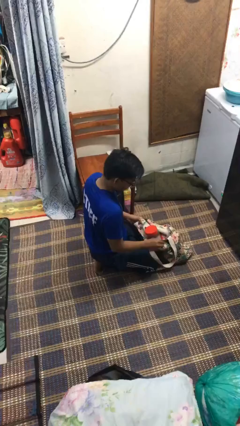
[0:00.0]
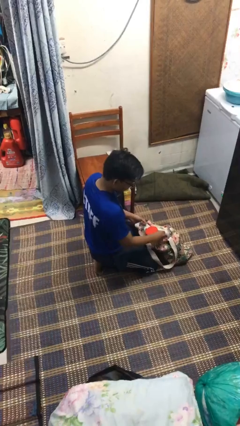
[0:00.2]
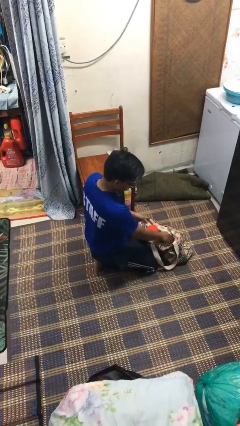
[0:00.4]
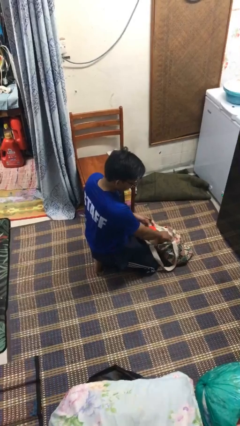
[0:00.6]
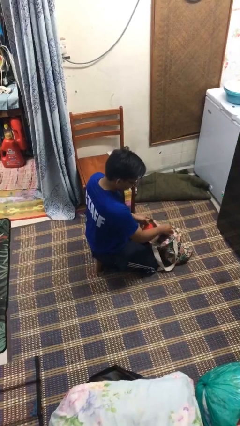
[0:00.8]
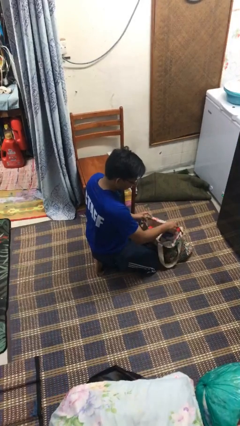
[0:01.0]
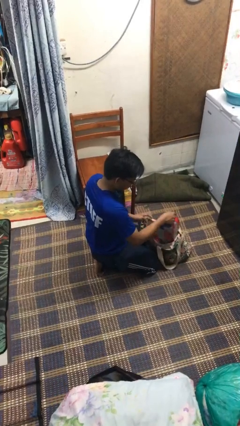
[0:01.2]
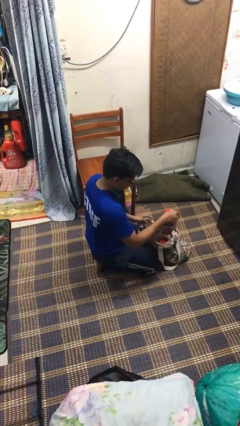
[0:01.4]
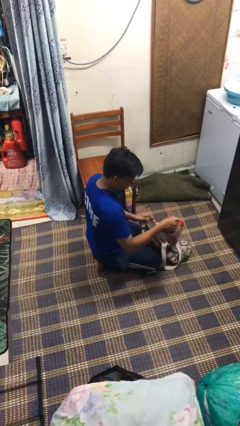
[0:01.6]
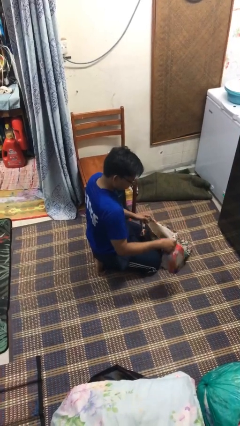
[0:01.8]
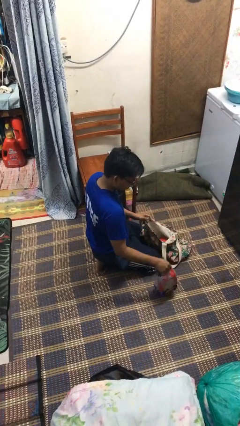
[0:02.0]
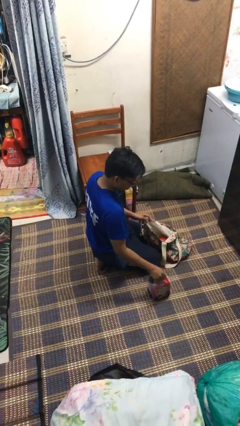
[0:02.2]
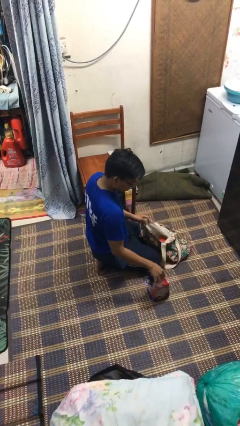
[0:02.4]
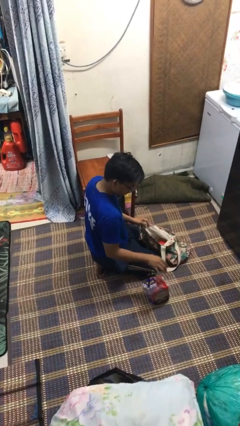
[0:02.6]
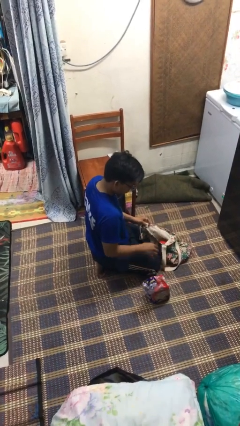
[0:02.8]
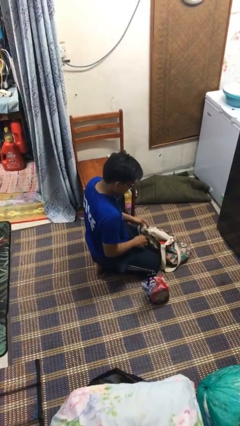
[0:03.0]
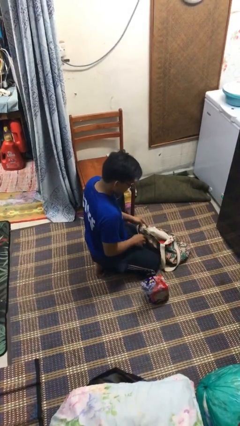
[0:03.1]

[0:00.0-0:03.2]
person takes object from bag

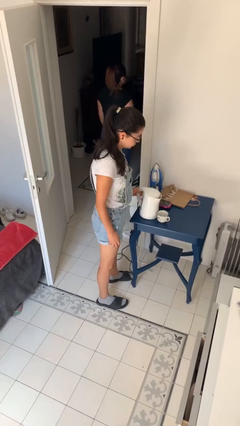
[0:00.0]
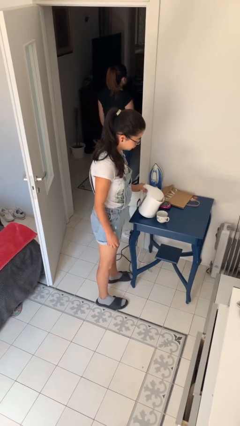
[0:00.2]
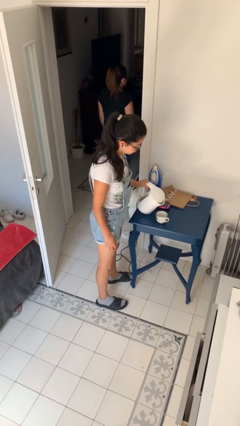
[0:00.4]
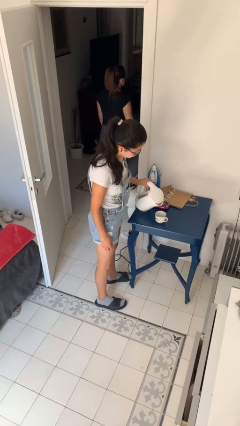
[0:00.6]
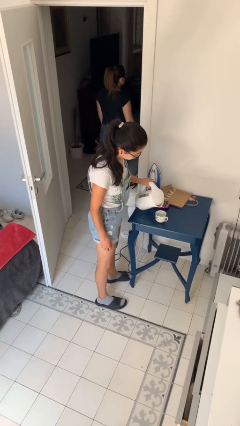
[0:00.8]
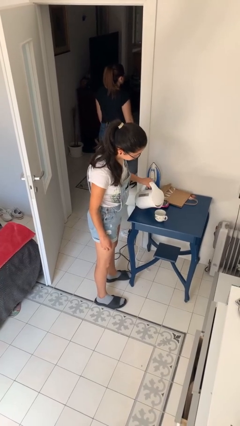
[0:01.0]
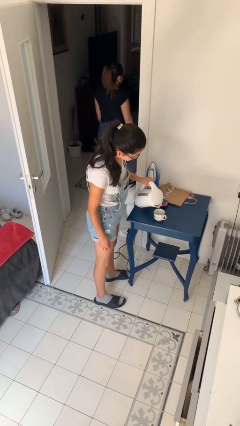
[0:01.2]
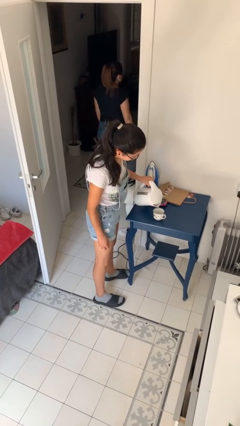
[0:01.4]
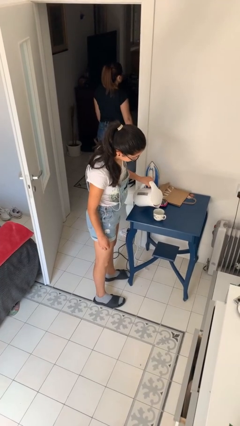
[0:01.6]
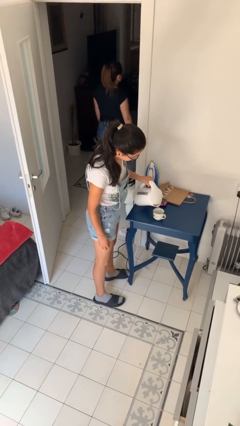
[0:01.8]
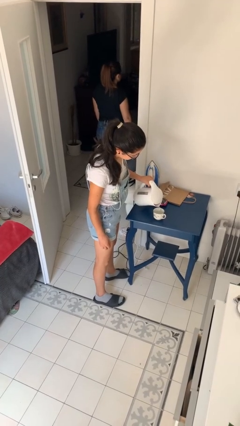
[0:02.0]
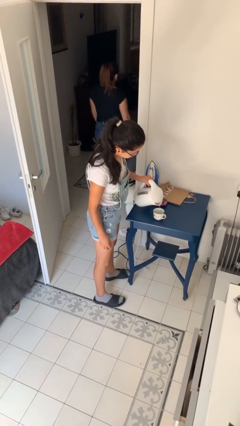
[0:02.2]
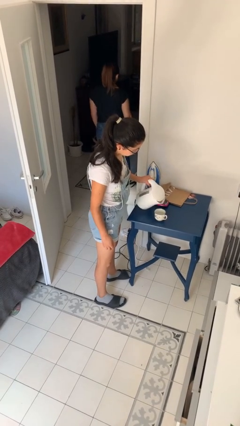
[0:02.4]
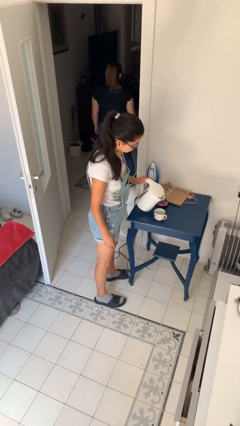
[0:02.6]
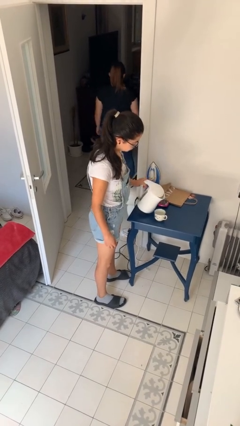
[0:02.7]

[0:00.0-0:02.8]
person pours coffee into mug

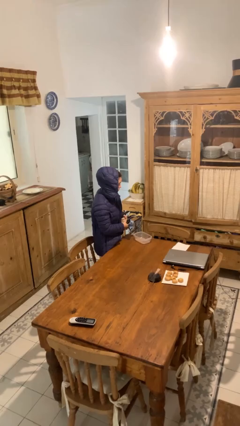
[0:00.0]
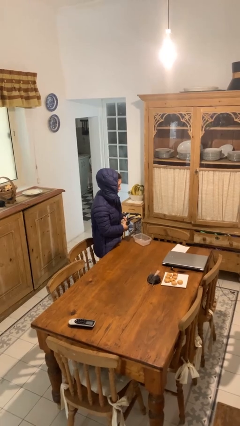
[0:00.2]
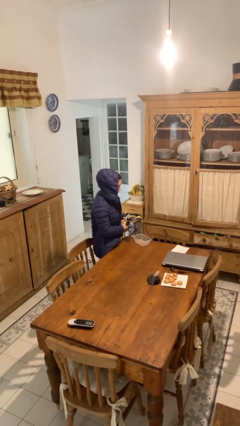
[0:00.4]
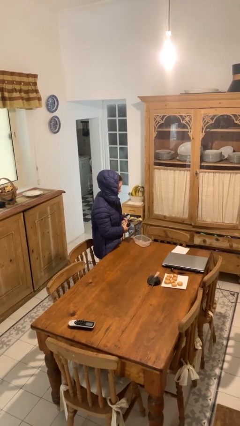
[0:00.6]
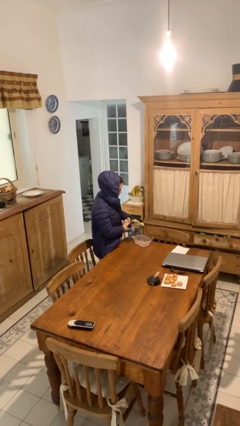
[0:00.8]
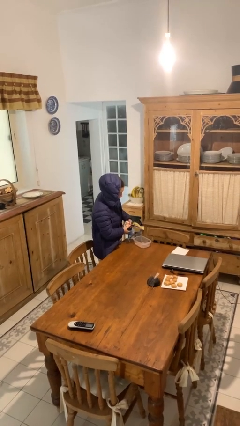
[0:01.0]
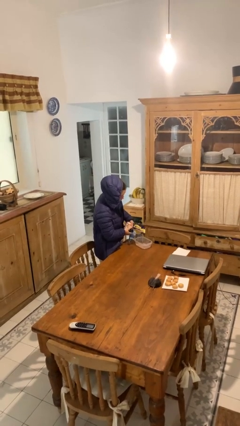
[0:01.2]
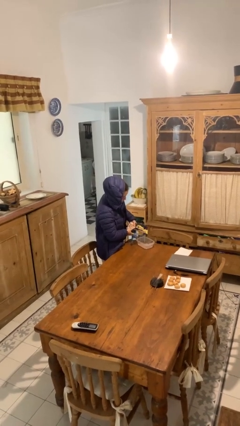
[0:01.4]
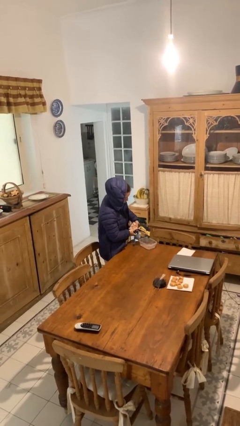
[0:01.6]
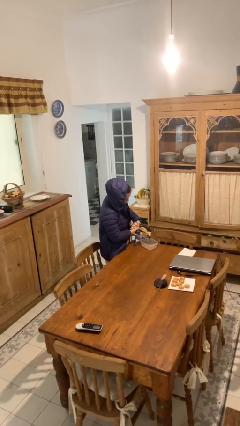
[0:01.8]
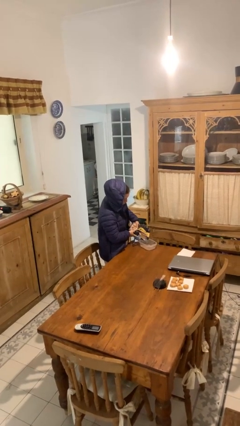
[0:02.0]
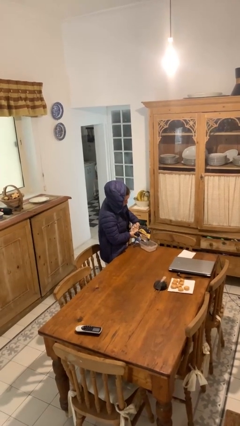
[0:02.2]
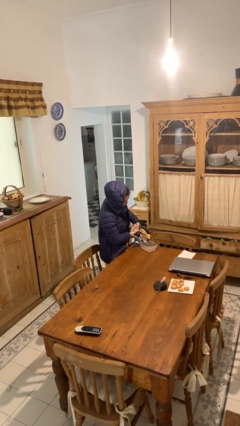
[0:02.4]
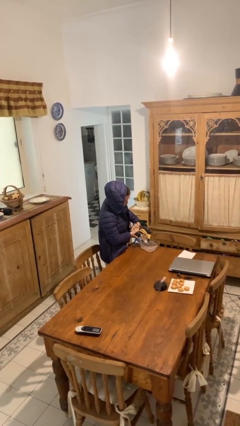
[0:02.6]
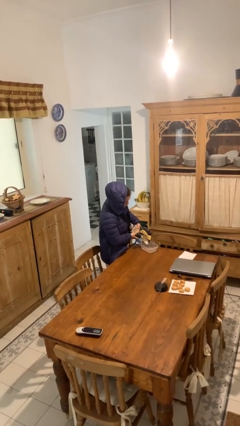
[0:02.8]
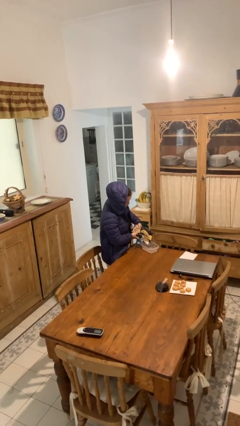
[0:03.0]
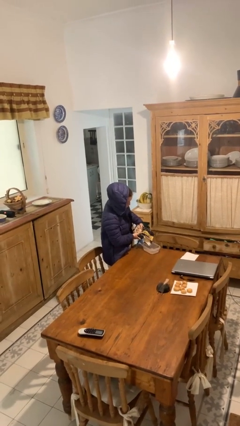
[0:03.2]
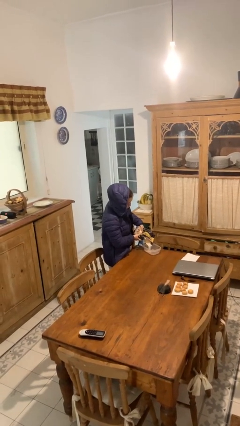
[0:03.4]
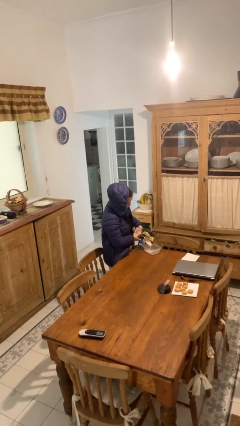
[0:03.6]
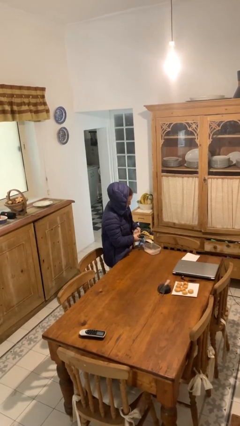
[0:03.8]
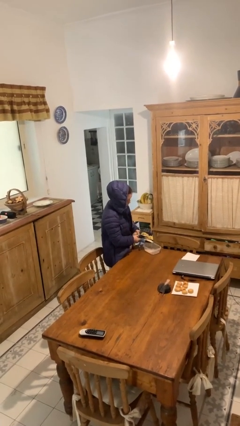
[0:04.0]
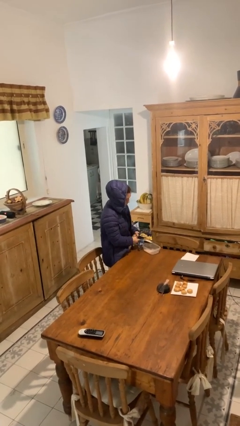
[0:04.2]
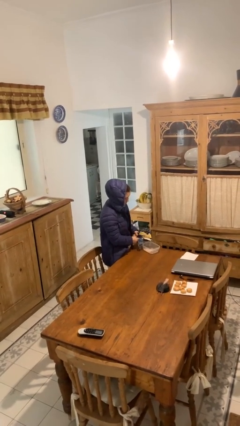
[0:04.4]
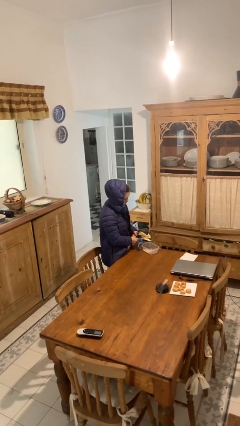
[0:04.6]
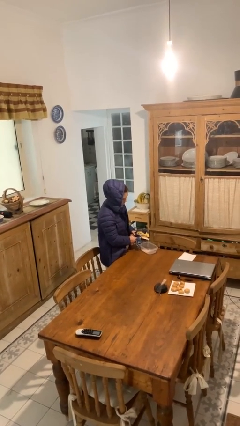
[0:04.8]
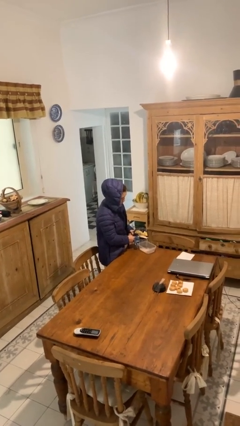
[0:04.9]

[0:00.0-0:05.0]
person pours into bowl

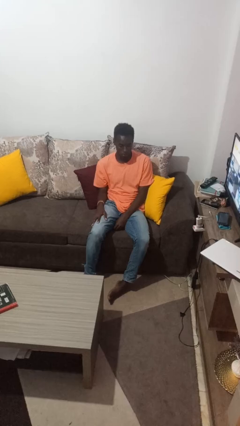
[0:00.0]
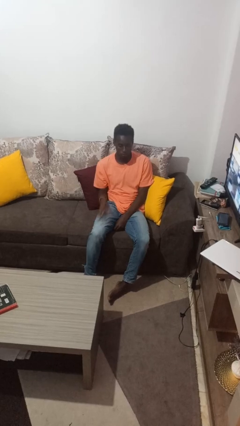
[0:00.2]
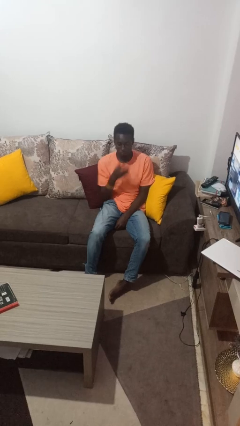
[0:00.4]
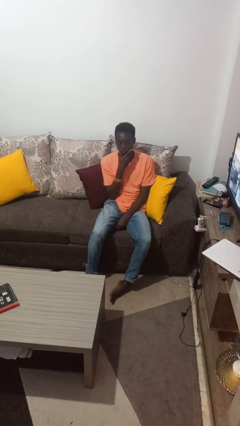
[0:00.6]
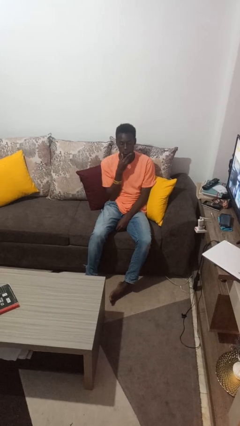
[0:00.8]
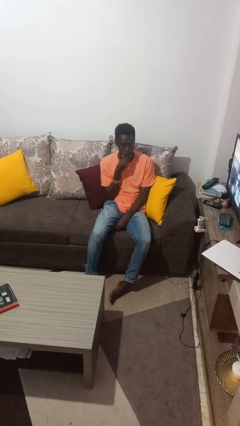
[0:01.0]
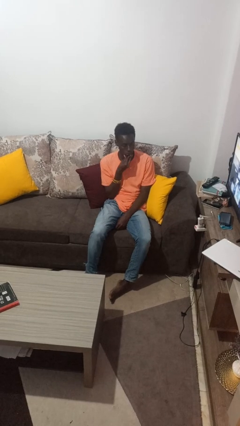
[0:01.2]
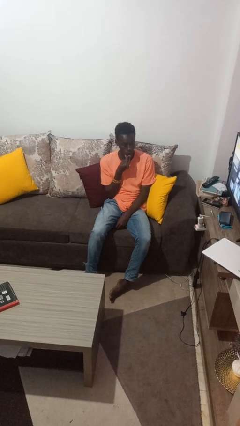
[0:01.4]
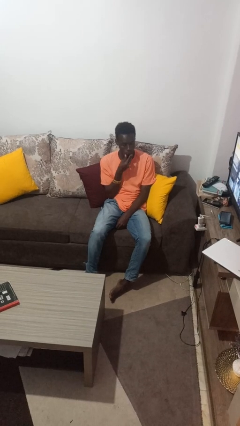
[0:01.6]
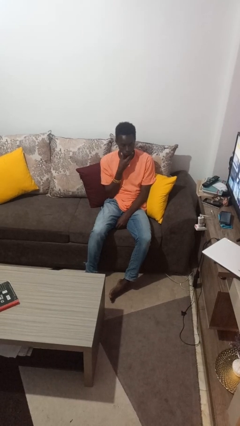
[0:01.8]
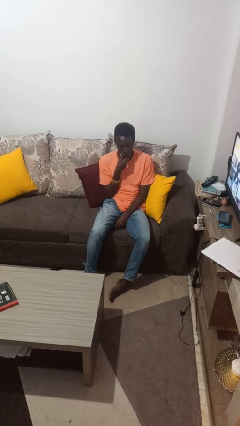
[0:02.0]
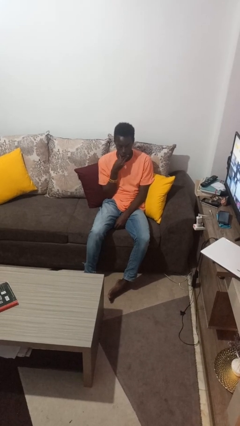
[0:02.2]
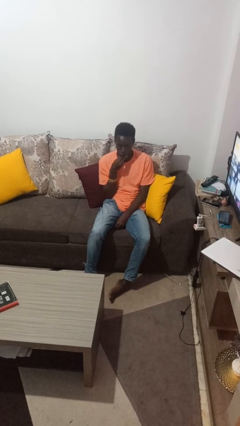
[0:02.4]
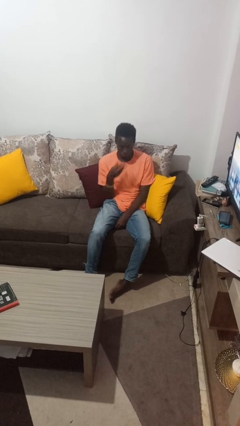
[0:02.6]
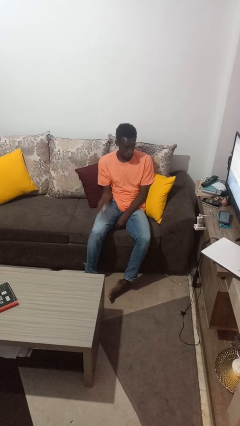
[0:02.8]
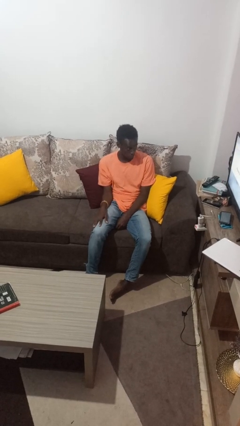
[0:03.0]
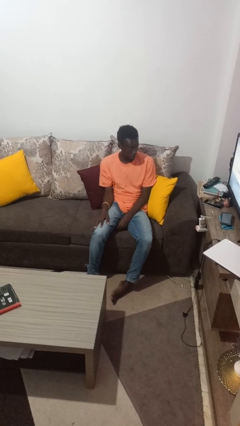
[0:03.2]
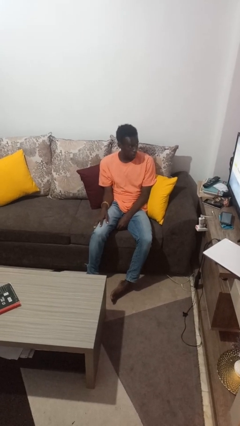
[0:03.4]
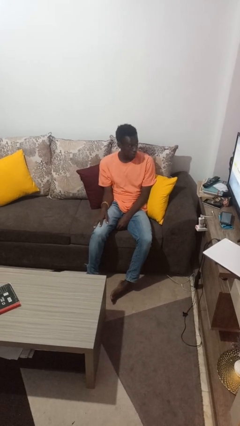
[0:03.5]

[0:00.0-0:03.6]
person strokes chin

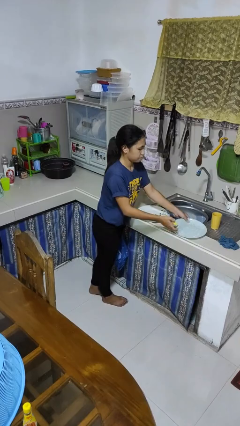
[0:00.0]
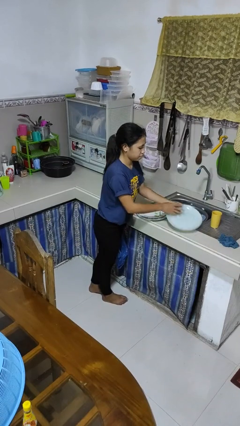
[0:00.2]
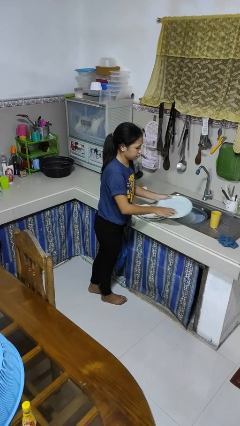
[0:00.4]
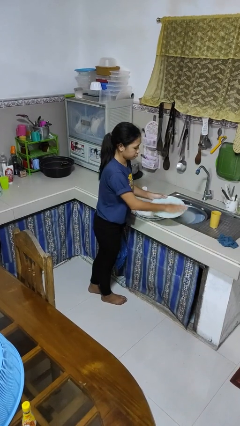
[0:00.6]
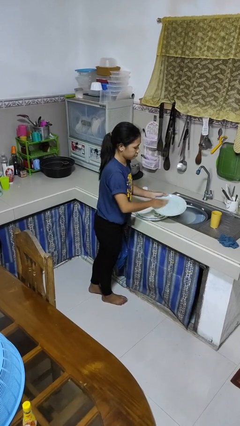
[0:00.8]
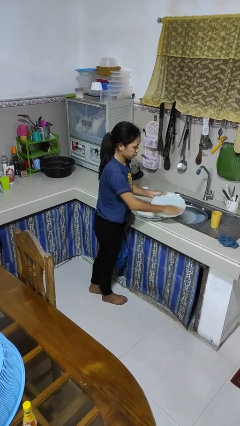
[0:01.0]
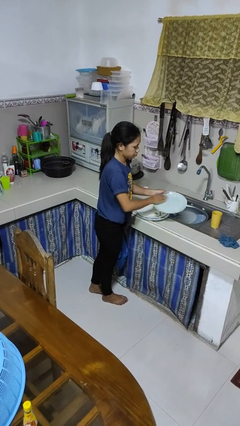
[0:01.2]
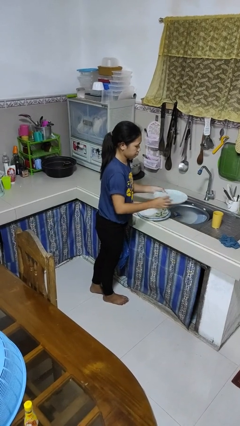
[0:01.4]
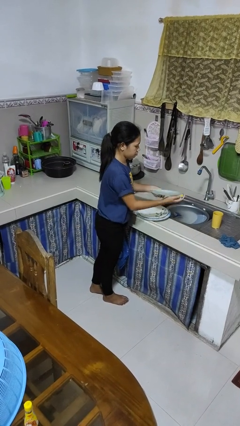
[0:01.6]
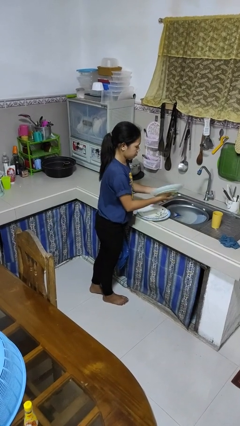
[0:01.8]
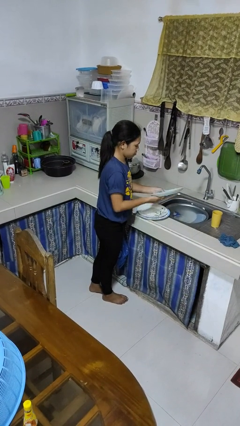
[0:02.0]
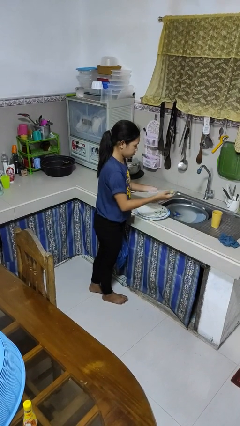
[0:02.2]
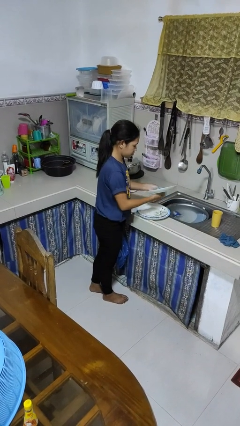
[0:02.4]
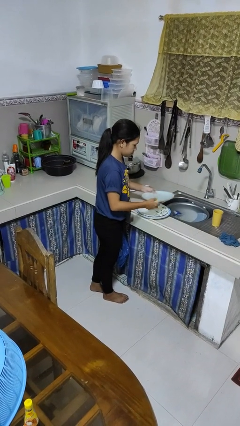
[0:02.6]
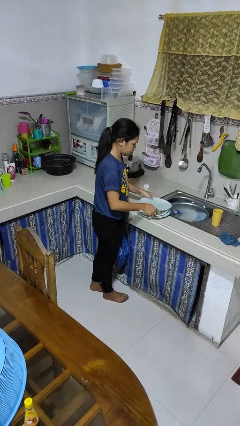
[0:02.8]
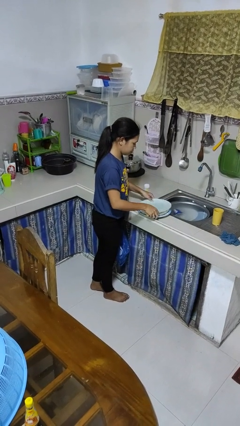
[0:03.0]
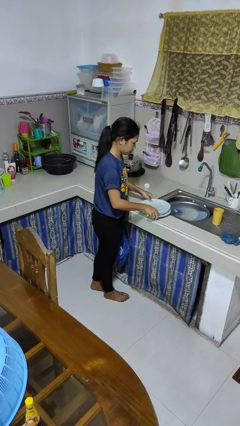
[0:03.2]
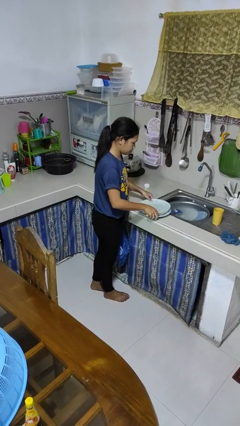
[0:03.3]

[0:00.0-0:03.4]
person washes dish
